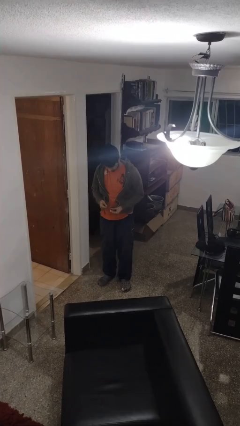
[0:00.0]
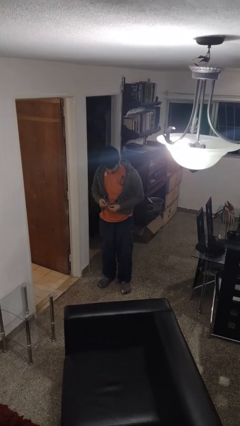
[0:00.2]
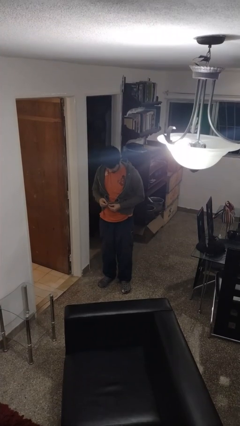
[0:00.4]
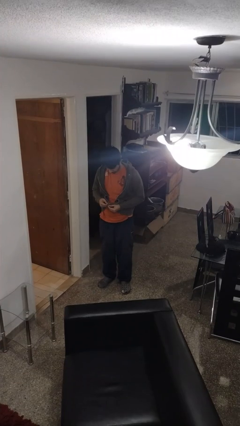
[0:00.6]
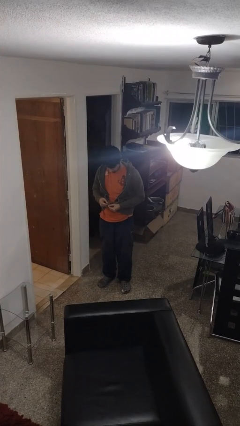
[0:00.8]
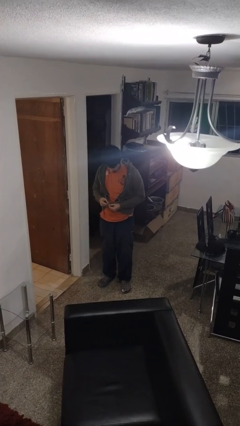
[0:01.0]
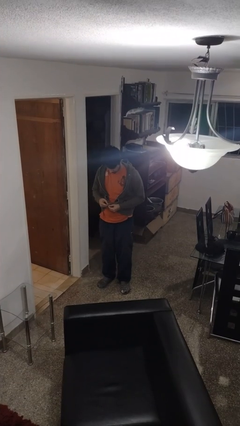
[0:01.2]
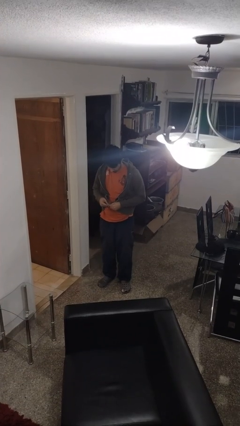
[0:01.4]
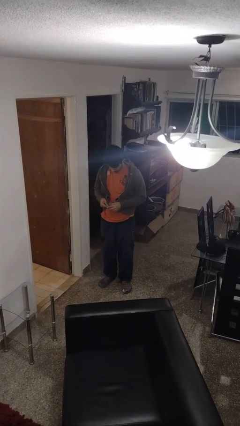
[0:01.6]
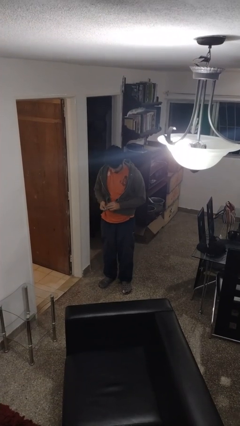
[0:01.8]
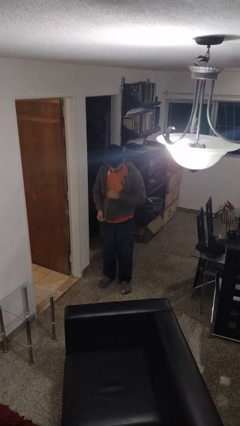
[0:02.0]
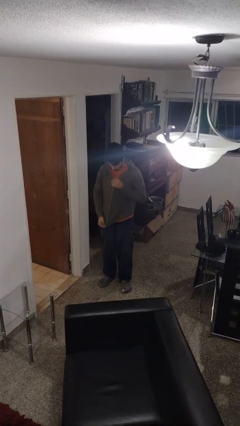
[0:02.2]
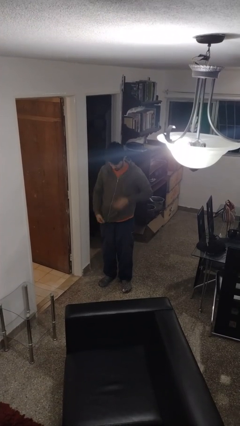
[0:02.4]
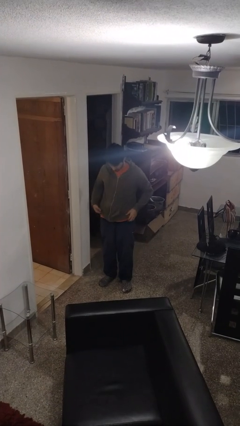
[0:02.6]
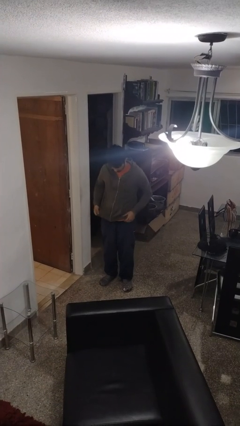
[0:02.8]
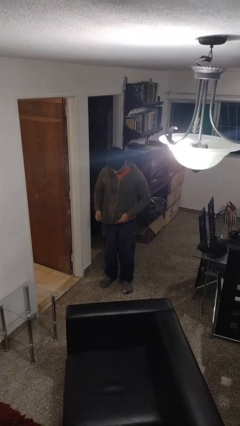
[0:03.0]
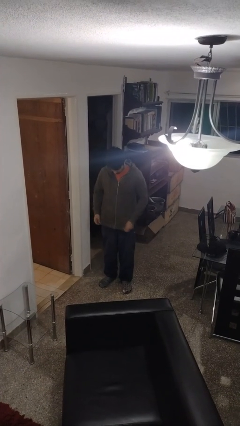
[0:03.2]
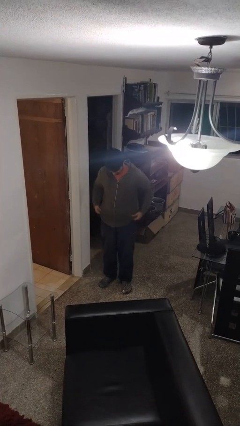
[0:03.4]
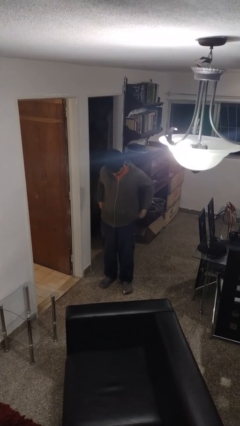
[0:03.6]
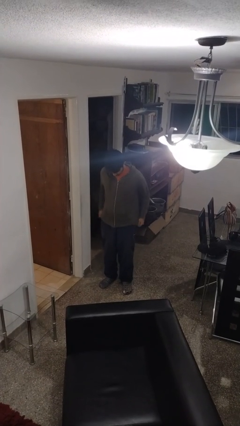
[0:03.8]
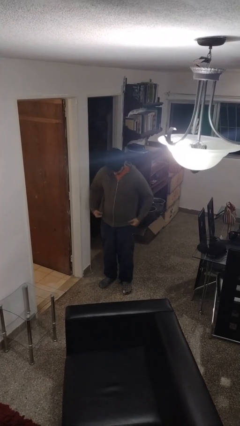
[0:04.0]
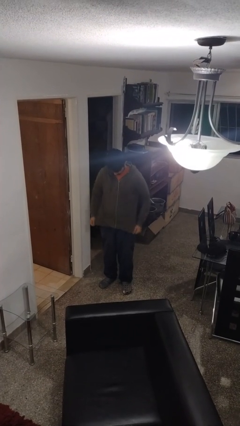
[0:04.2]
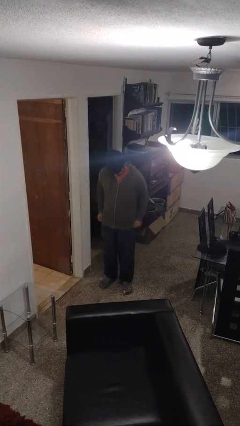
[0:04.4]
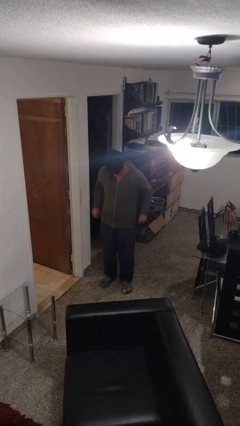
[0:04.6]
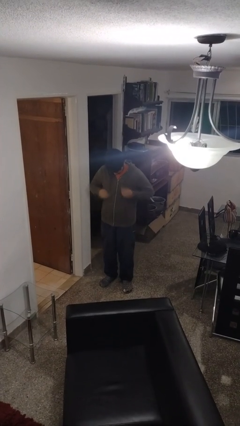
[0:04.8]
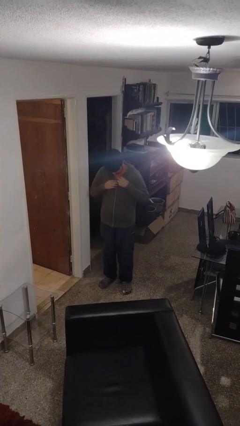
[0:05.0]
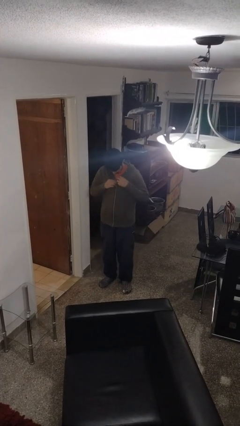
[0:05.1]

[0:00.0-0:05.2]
person zips up jacket

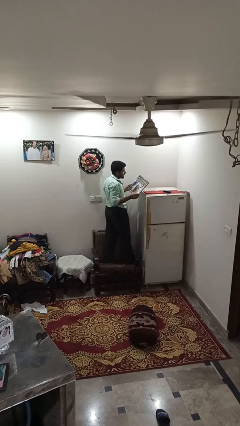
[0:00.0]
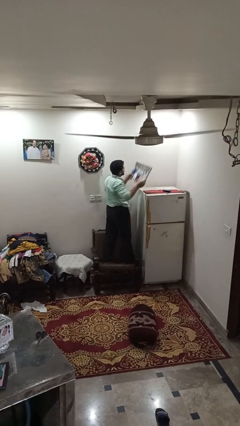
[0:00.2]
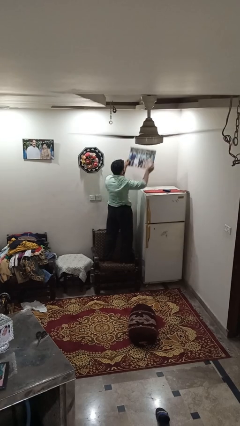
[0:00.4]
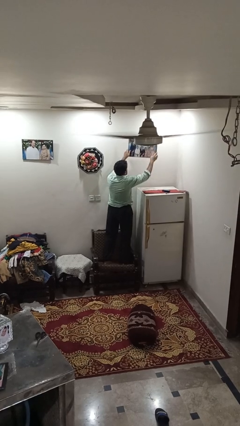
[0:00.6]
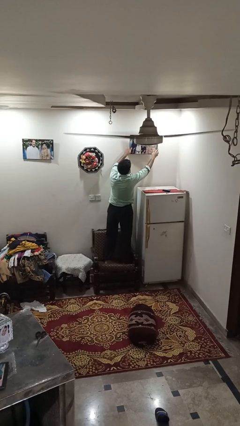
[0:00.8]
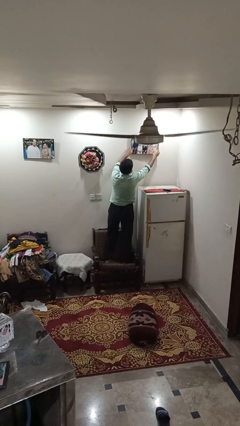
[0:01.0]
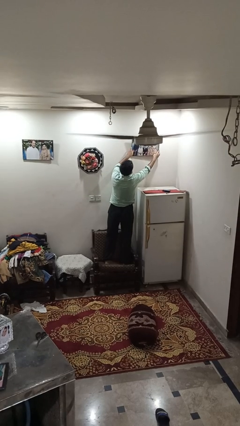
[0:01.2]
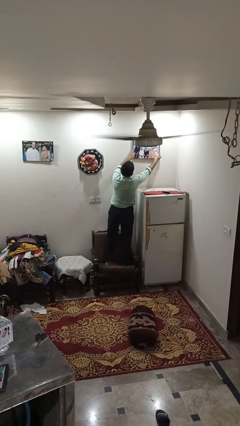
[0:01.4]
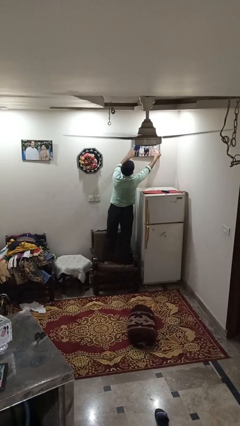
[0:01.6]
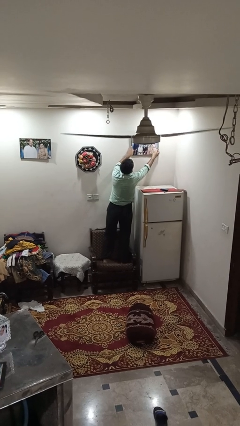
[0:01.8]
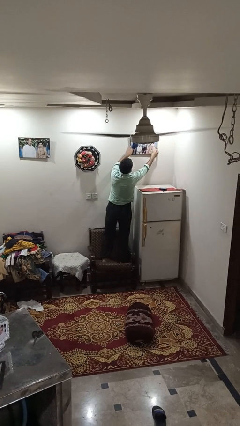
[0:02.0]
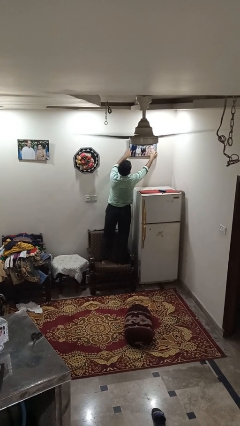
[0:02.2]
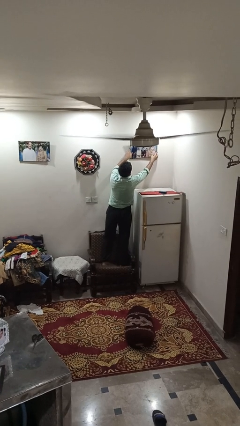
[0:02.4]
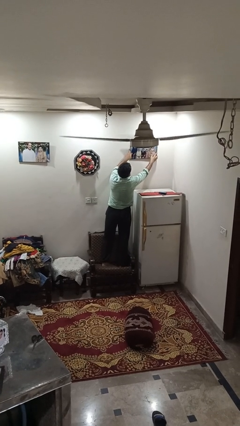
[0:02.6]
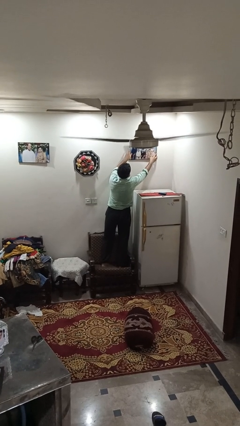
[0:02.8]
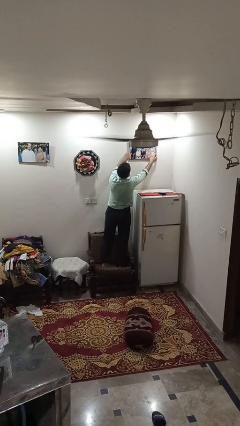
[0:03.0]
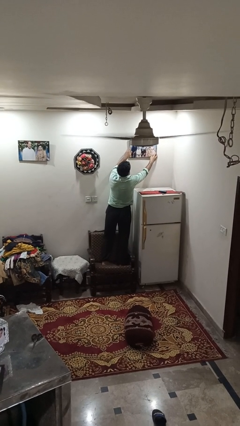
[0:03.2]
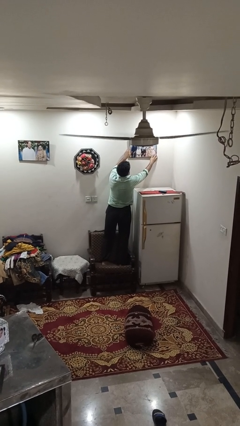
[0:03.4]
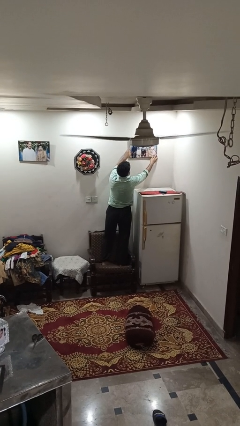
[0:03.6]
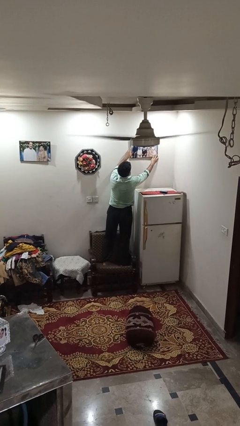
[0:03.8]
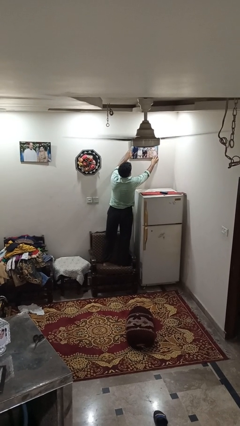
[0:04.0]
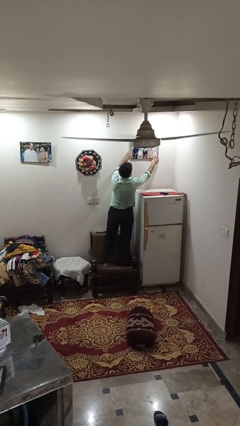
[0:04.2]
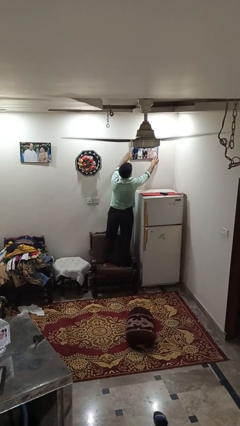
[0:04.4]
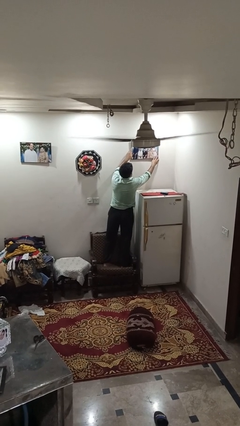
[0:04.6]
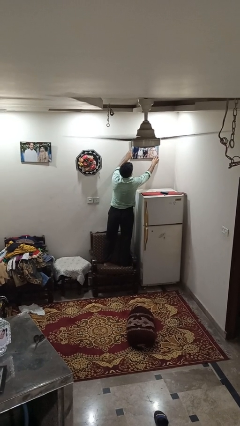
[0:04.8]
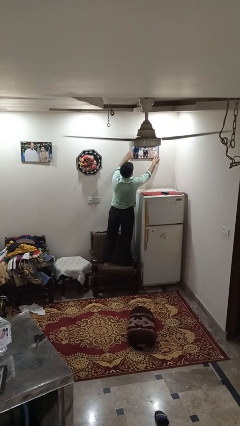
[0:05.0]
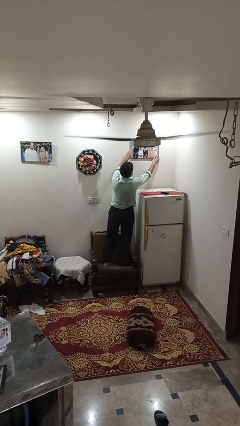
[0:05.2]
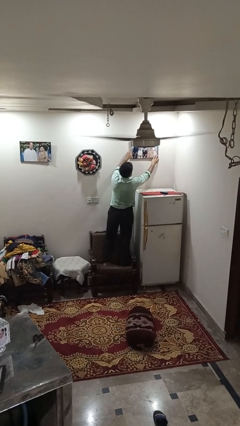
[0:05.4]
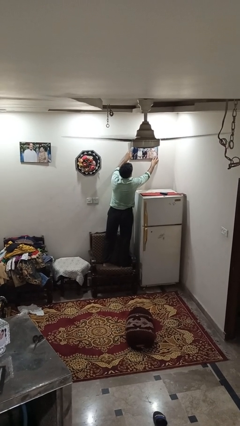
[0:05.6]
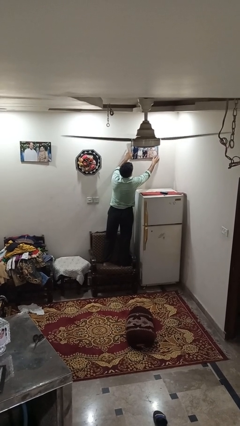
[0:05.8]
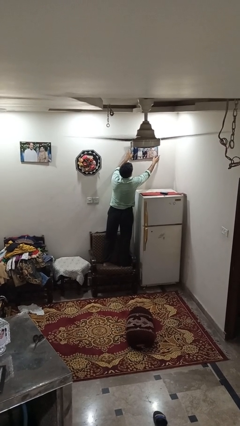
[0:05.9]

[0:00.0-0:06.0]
person puts up picture frame

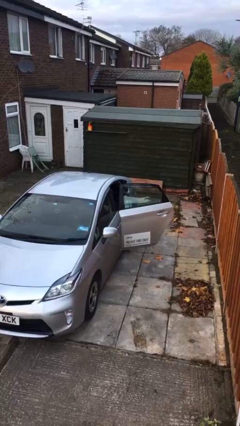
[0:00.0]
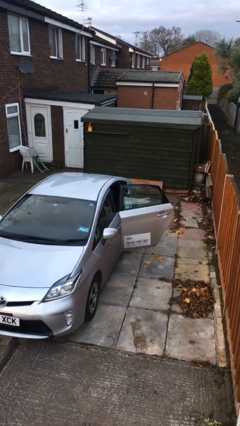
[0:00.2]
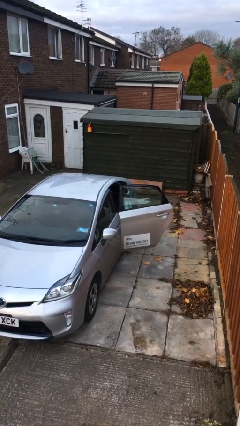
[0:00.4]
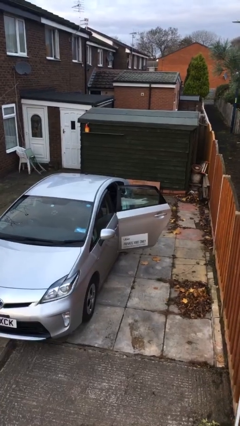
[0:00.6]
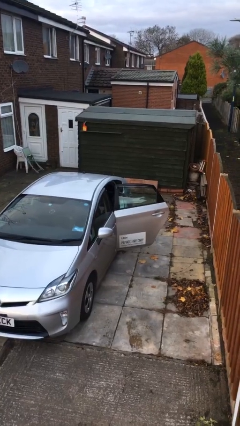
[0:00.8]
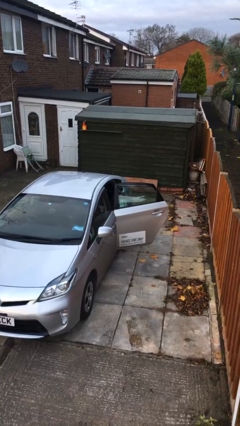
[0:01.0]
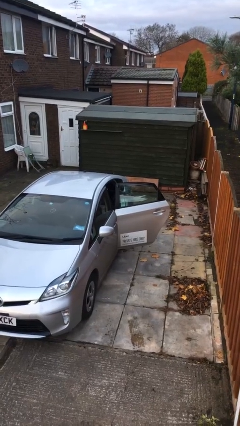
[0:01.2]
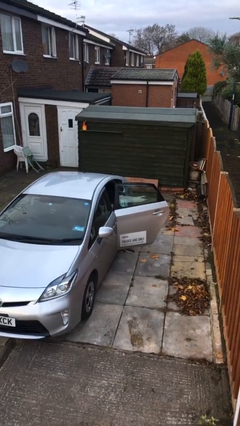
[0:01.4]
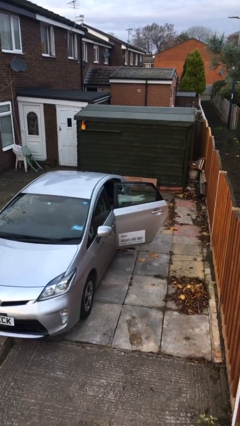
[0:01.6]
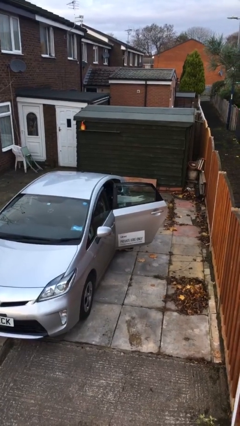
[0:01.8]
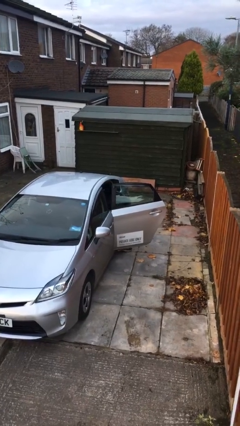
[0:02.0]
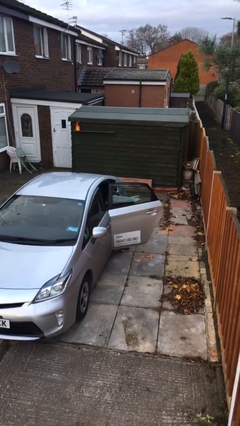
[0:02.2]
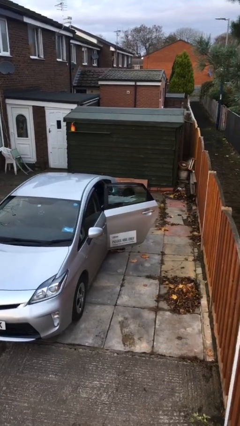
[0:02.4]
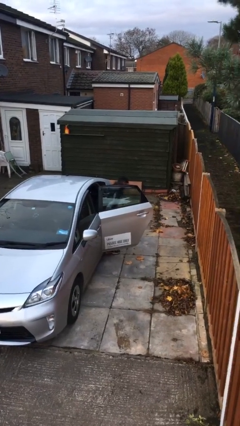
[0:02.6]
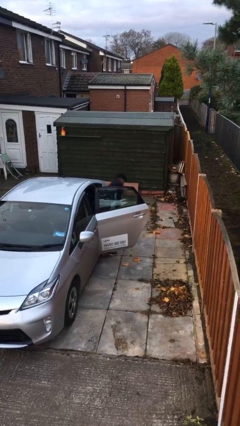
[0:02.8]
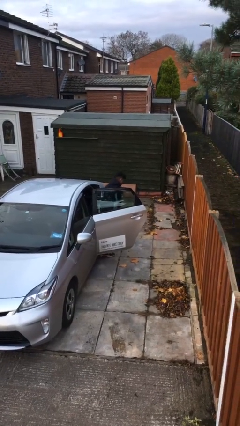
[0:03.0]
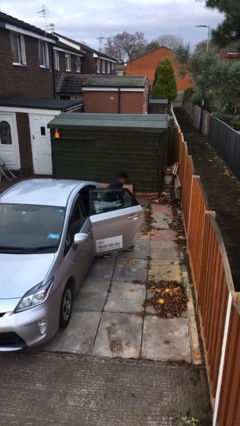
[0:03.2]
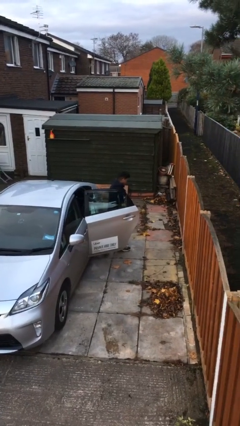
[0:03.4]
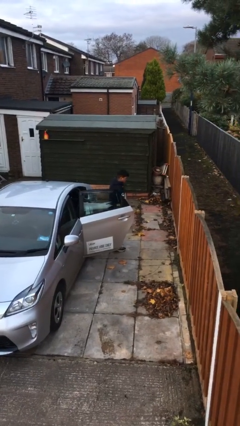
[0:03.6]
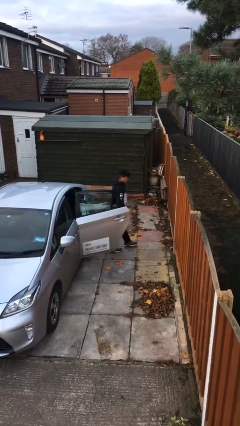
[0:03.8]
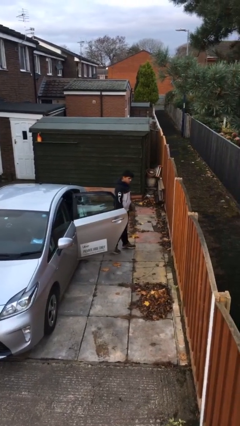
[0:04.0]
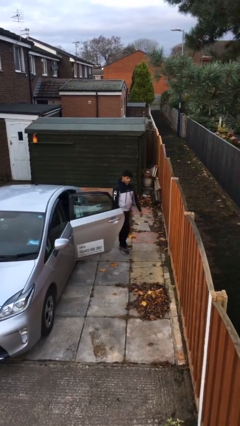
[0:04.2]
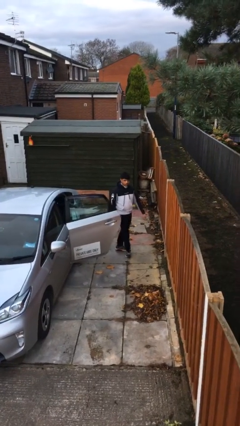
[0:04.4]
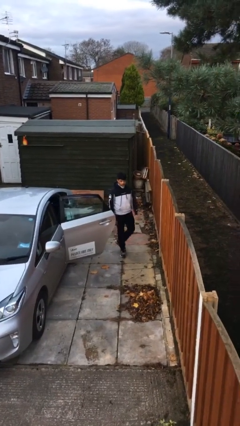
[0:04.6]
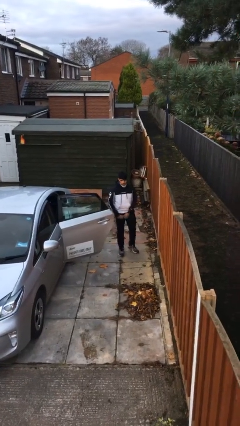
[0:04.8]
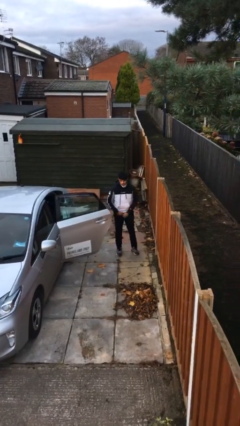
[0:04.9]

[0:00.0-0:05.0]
person exits car

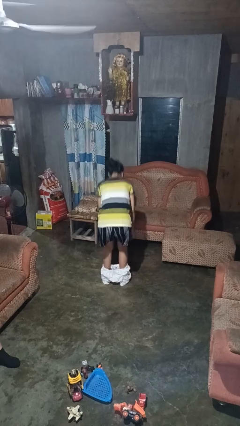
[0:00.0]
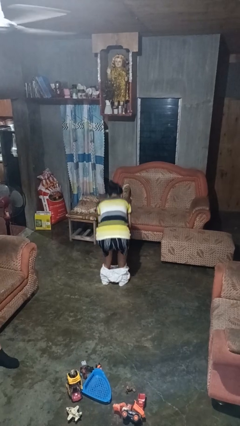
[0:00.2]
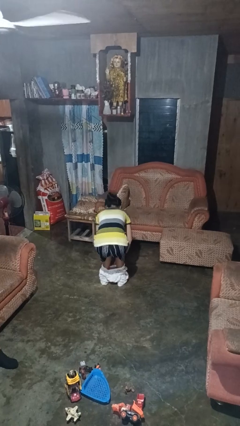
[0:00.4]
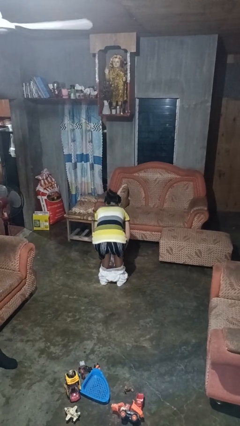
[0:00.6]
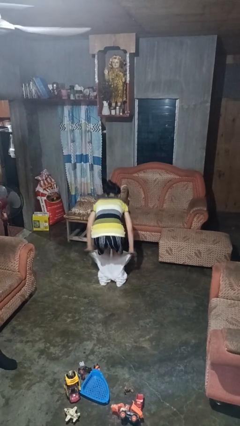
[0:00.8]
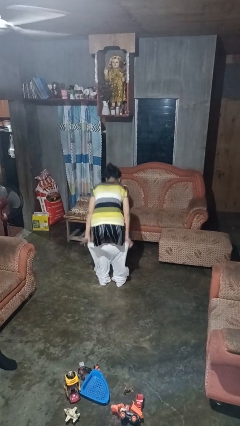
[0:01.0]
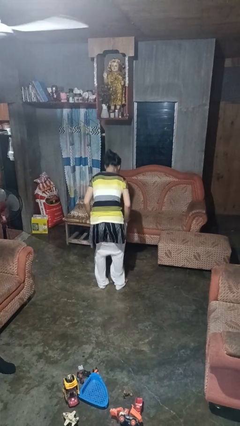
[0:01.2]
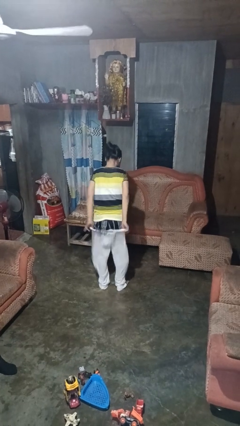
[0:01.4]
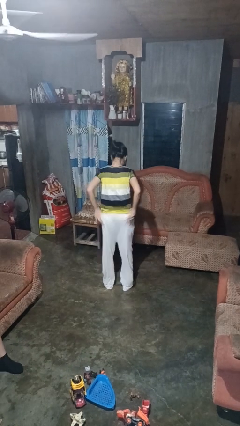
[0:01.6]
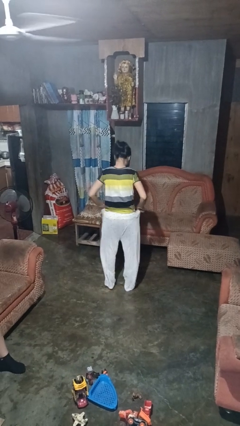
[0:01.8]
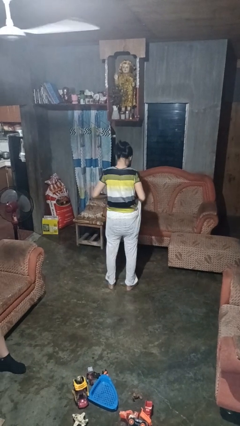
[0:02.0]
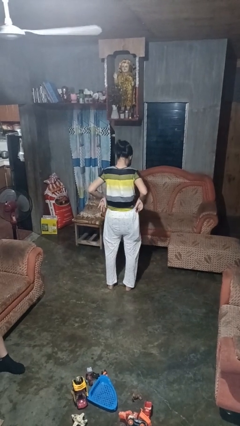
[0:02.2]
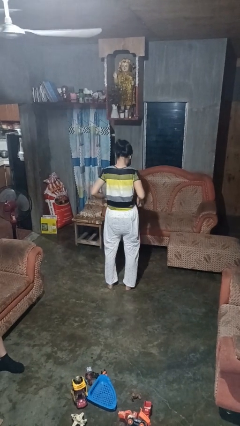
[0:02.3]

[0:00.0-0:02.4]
person puts on pants
